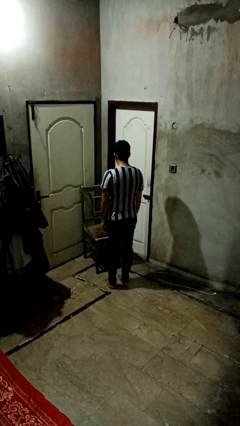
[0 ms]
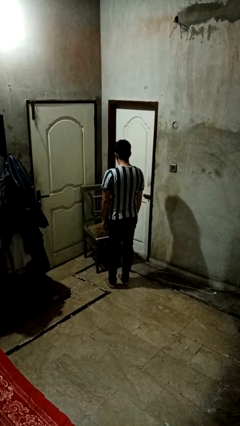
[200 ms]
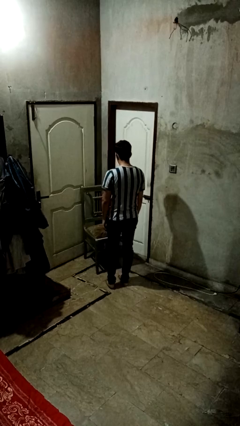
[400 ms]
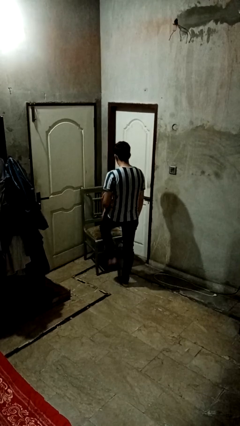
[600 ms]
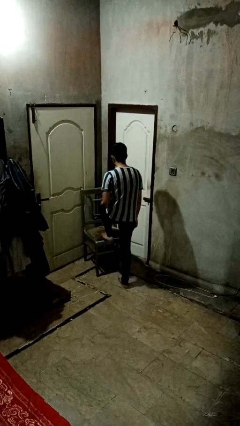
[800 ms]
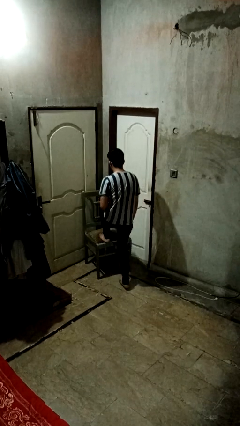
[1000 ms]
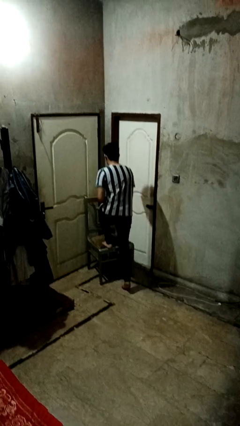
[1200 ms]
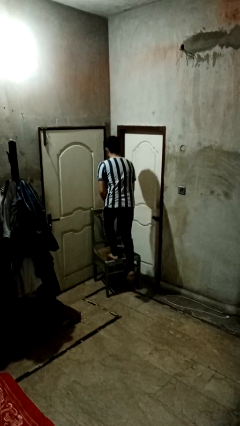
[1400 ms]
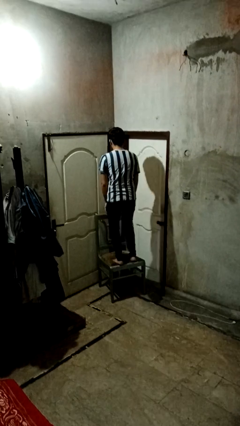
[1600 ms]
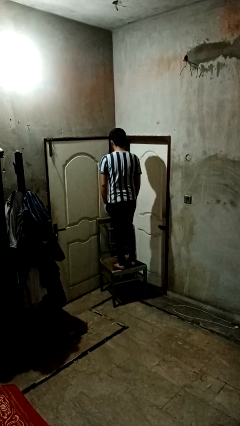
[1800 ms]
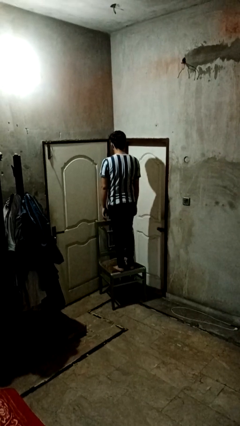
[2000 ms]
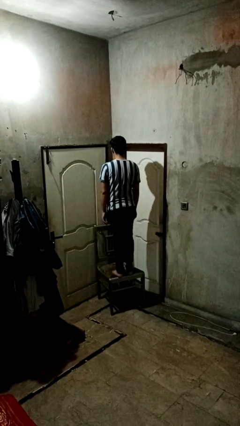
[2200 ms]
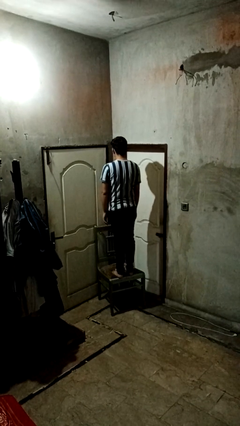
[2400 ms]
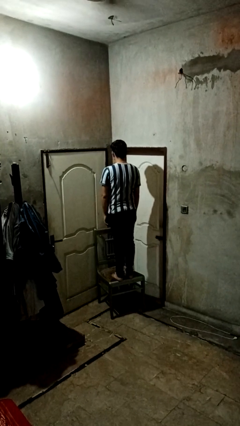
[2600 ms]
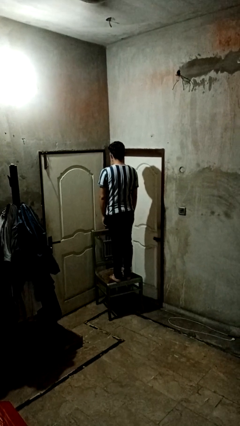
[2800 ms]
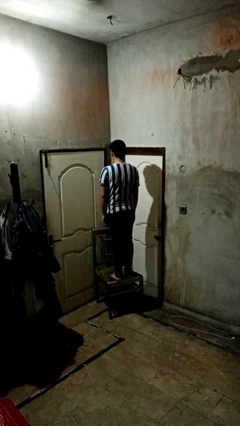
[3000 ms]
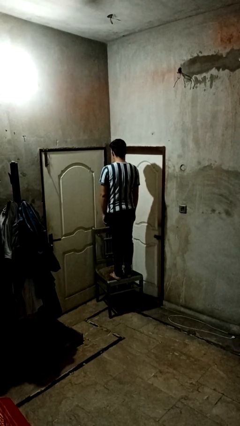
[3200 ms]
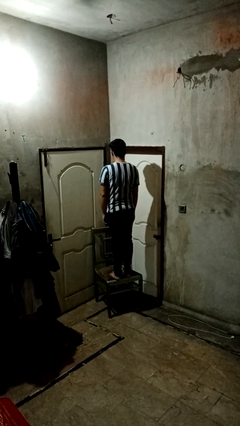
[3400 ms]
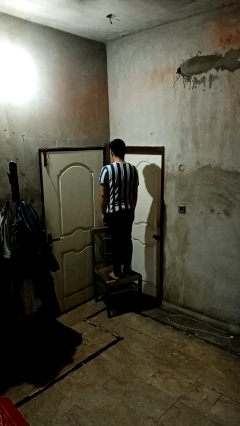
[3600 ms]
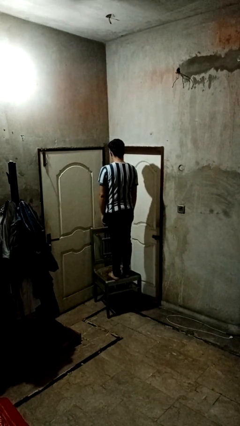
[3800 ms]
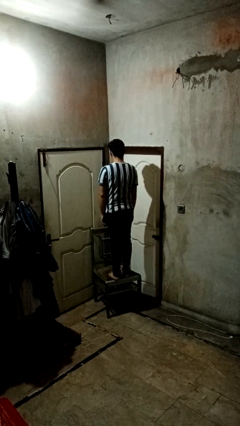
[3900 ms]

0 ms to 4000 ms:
person climbs on chair

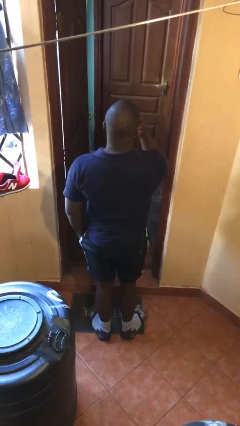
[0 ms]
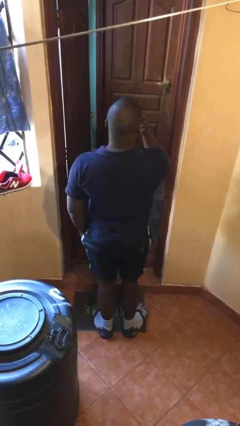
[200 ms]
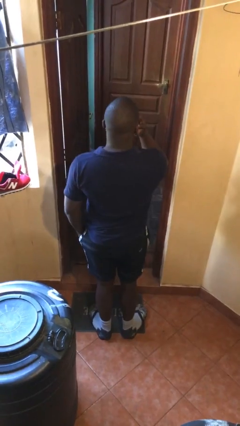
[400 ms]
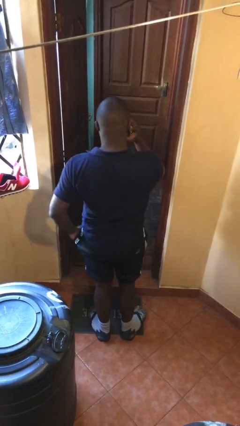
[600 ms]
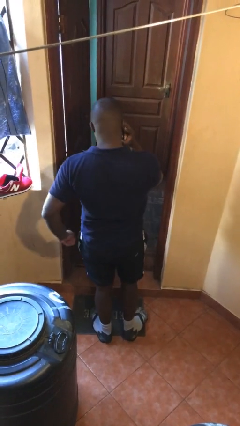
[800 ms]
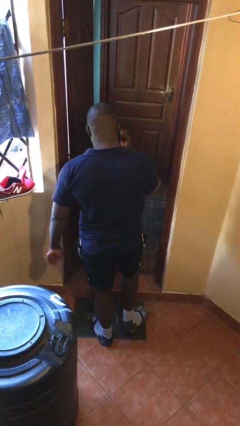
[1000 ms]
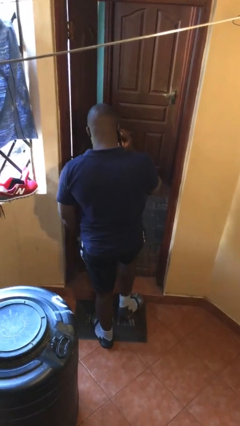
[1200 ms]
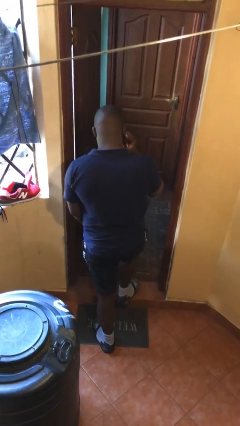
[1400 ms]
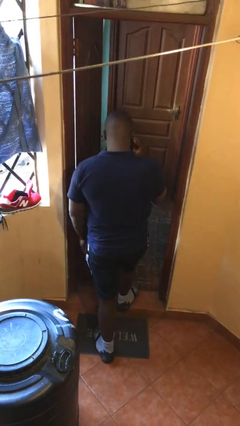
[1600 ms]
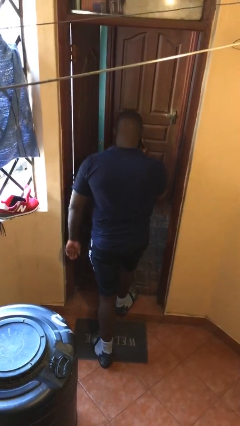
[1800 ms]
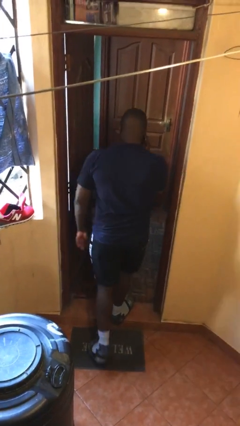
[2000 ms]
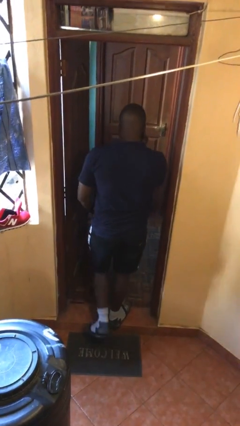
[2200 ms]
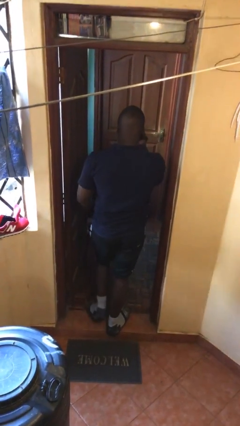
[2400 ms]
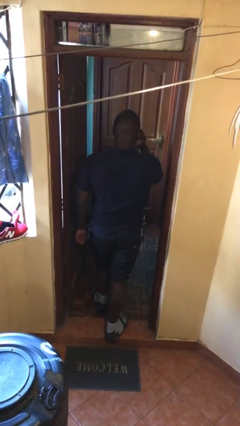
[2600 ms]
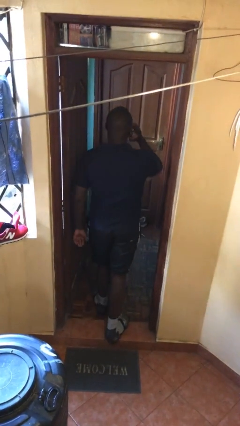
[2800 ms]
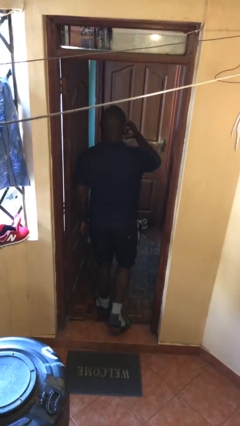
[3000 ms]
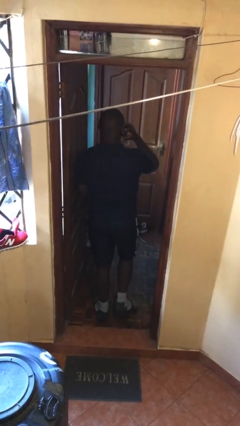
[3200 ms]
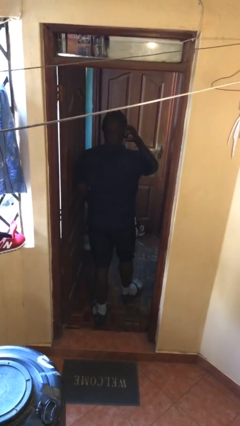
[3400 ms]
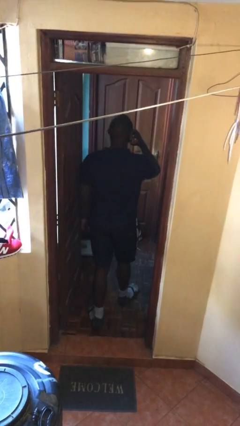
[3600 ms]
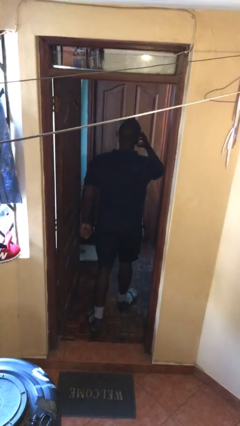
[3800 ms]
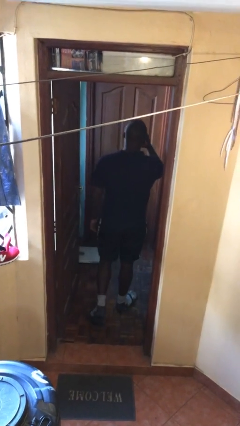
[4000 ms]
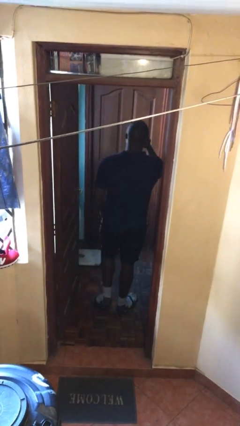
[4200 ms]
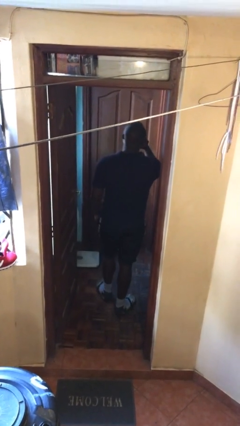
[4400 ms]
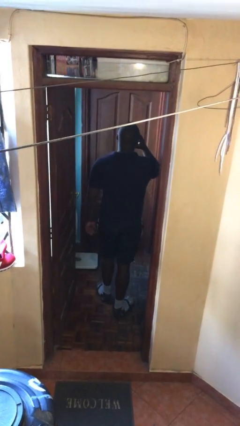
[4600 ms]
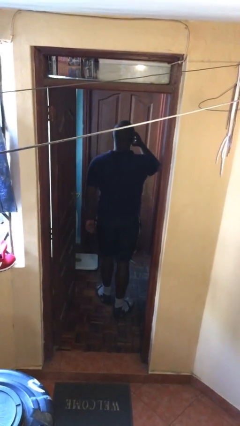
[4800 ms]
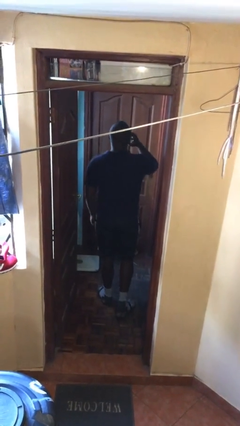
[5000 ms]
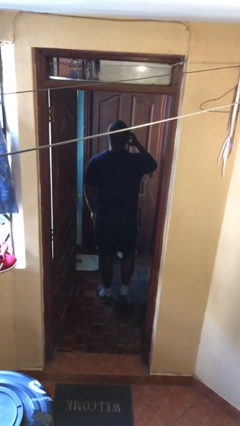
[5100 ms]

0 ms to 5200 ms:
person exits scene through structure

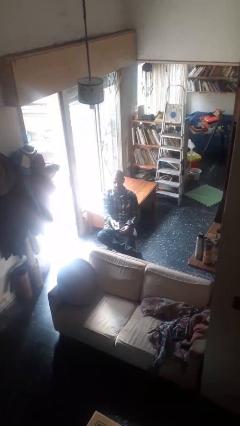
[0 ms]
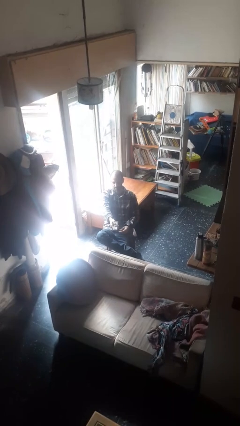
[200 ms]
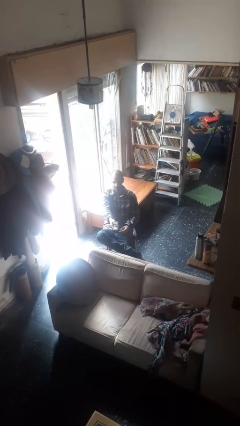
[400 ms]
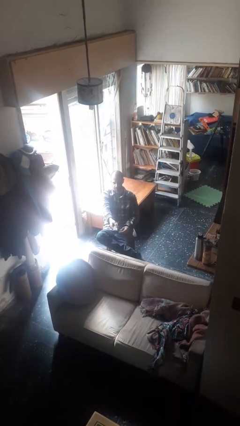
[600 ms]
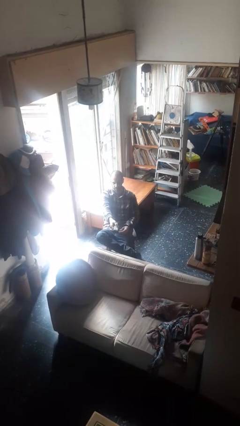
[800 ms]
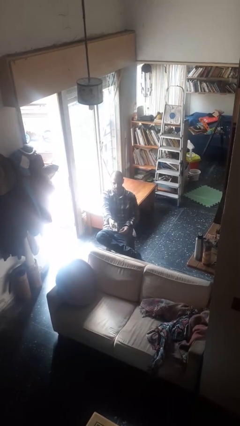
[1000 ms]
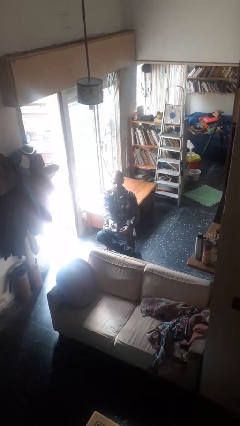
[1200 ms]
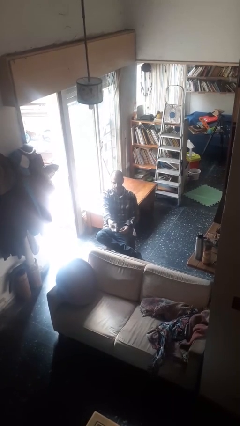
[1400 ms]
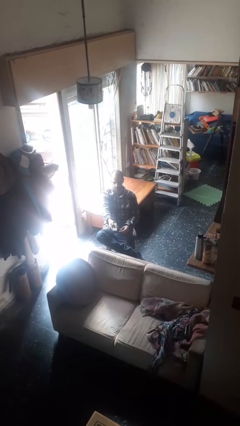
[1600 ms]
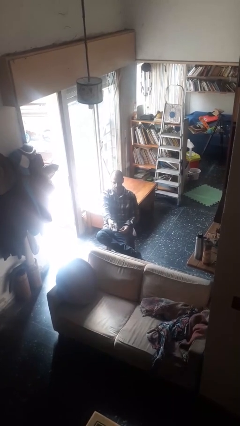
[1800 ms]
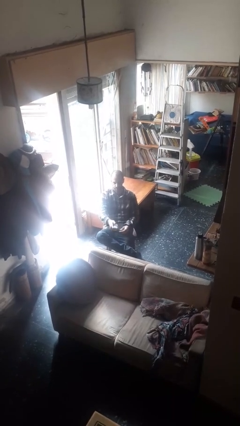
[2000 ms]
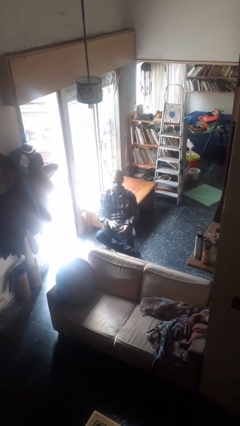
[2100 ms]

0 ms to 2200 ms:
person uses television remote

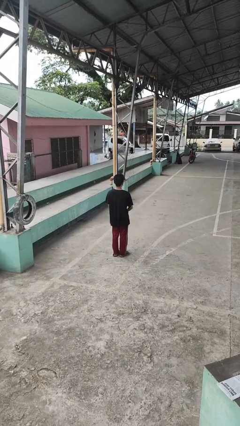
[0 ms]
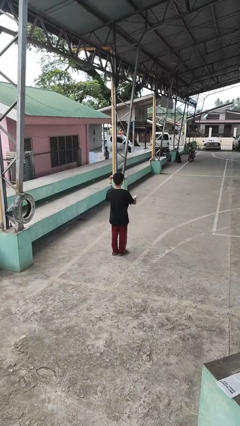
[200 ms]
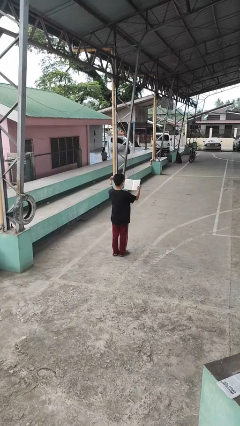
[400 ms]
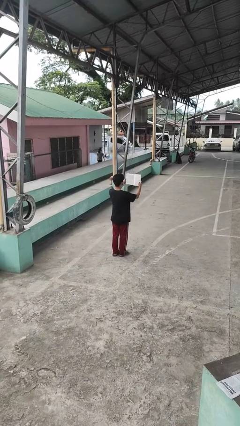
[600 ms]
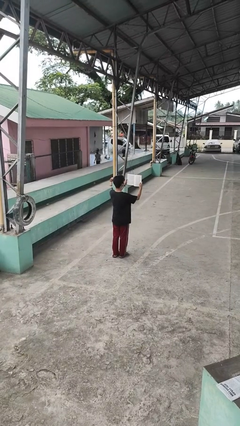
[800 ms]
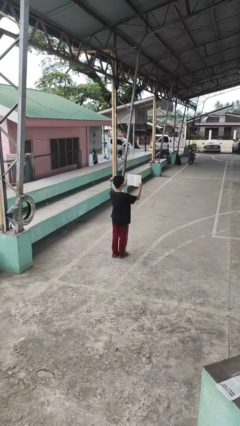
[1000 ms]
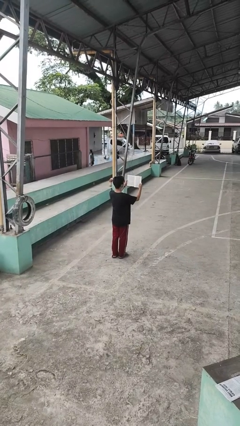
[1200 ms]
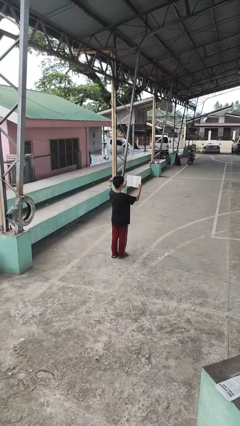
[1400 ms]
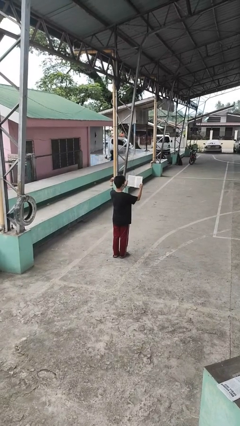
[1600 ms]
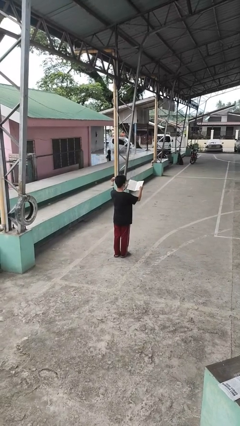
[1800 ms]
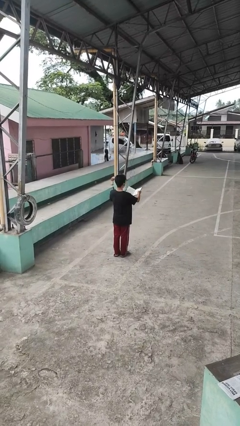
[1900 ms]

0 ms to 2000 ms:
person reads book

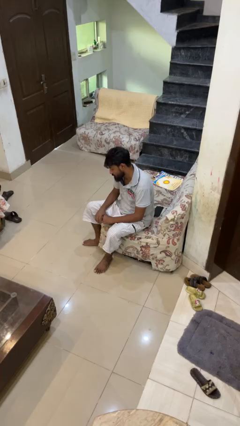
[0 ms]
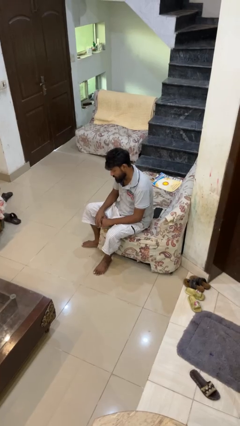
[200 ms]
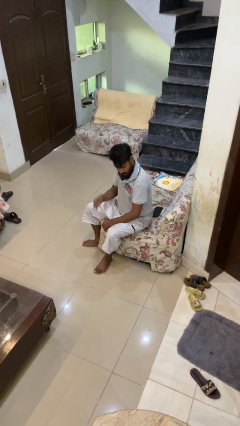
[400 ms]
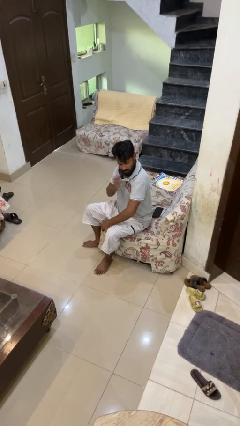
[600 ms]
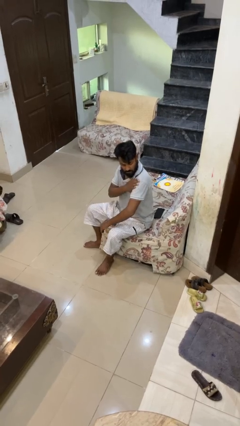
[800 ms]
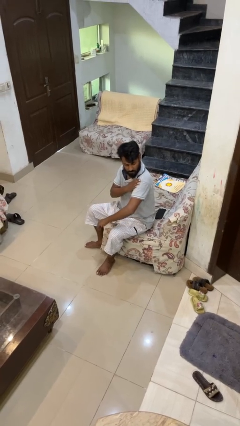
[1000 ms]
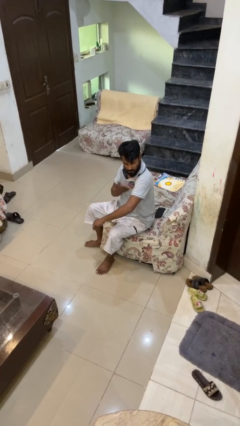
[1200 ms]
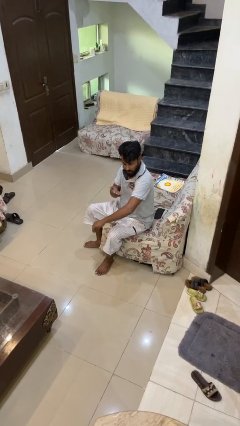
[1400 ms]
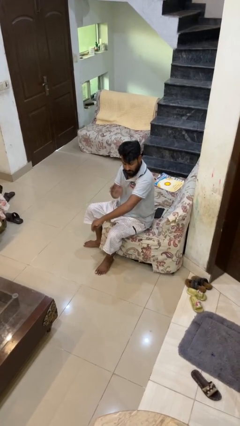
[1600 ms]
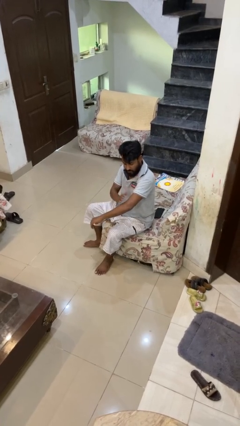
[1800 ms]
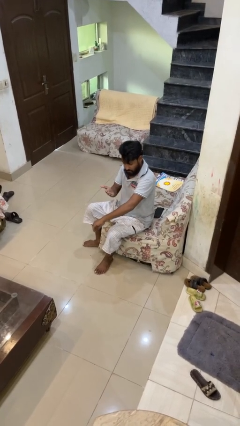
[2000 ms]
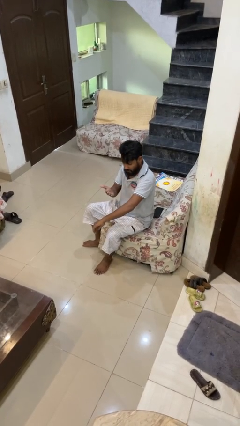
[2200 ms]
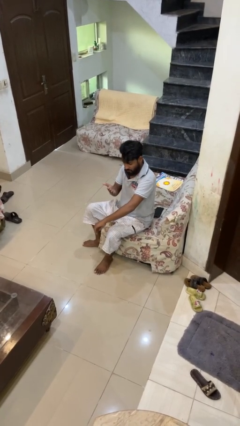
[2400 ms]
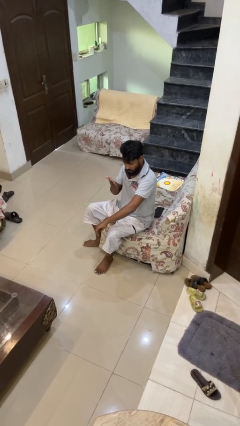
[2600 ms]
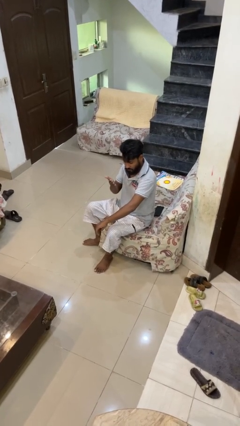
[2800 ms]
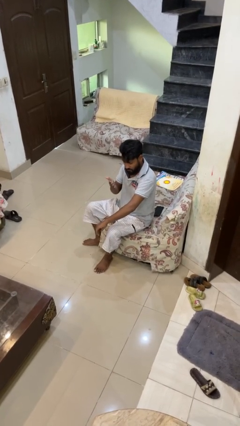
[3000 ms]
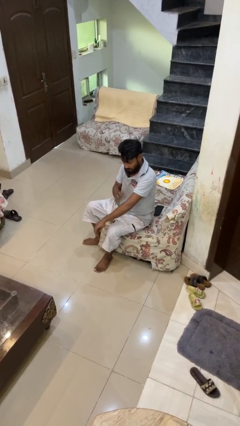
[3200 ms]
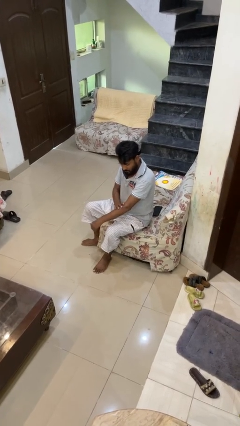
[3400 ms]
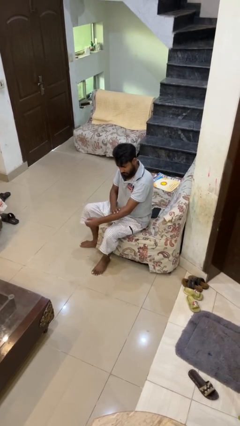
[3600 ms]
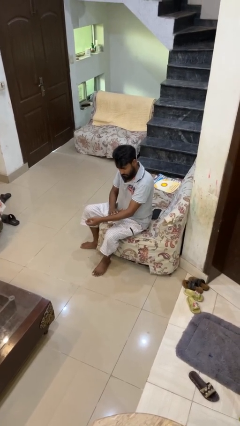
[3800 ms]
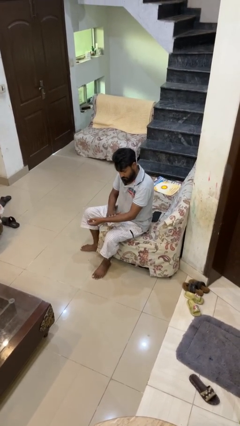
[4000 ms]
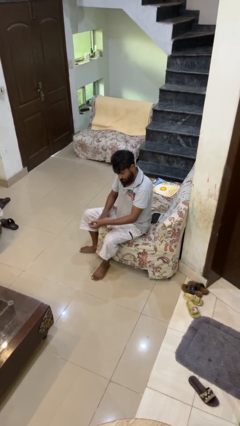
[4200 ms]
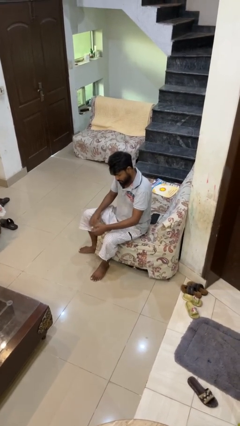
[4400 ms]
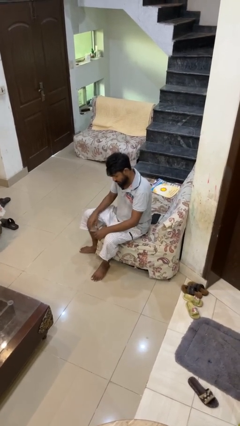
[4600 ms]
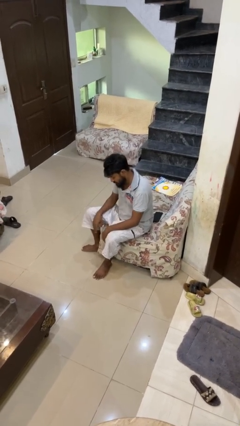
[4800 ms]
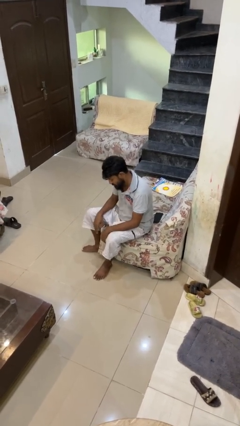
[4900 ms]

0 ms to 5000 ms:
person swats bug
